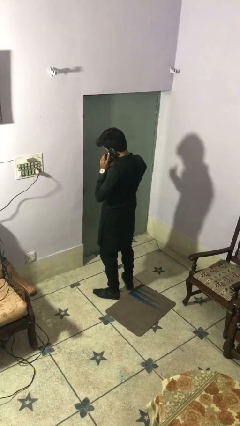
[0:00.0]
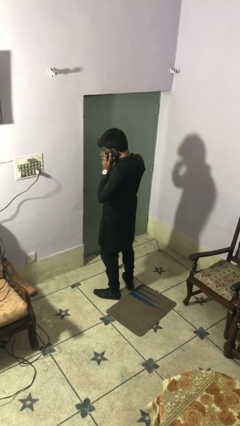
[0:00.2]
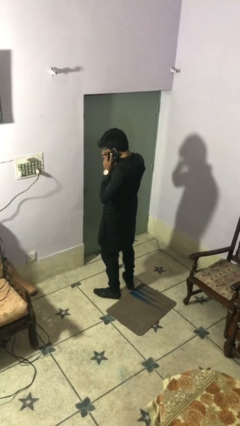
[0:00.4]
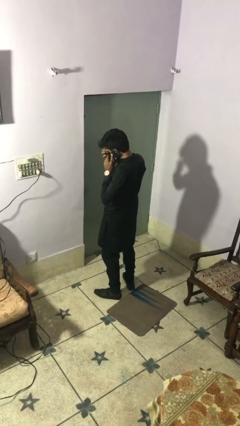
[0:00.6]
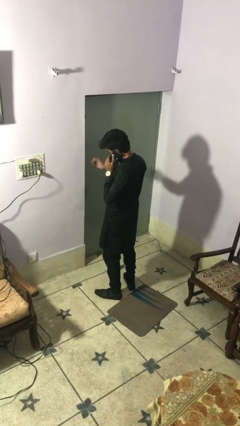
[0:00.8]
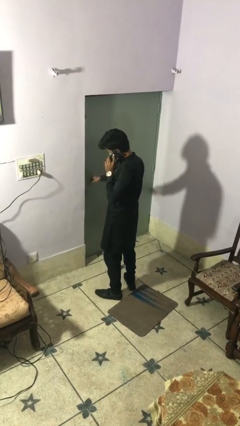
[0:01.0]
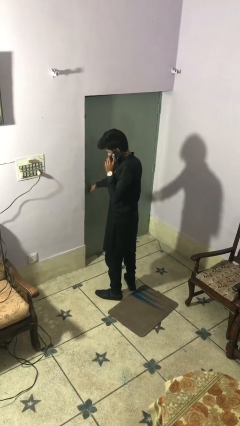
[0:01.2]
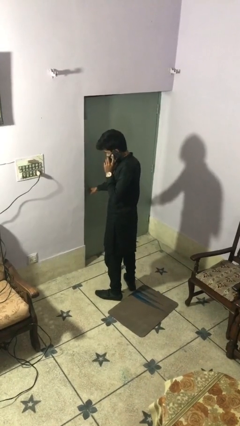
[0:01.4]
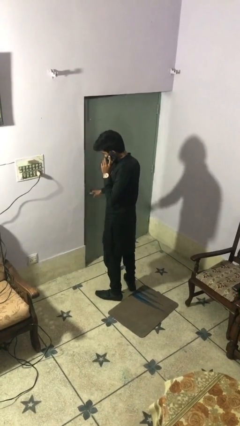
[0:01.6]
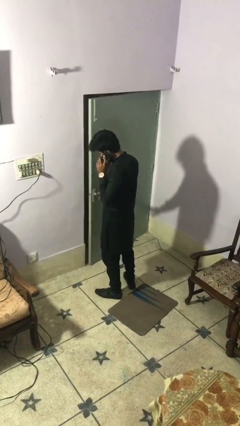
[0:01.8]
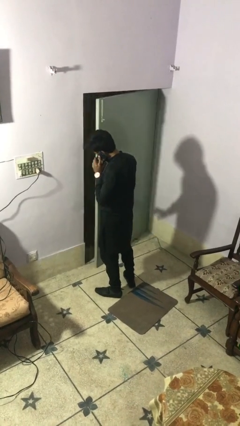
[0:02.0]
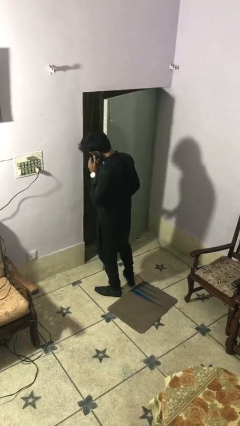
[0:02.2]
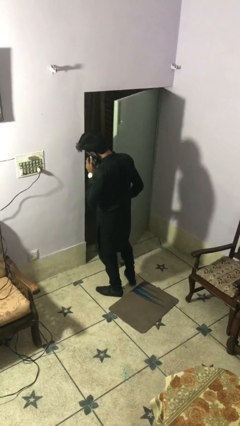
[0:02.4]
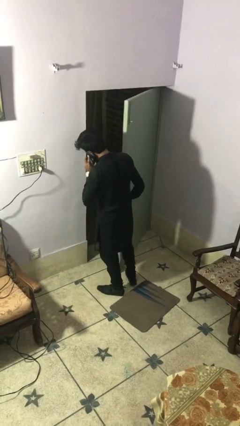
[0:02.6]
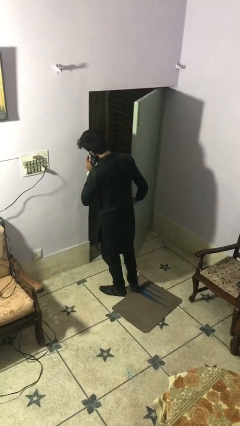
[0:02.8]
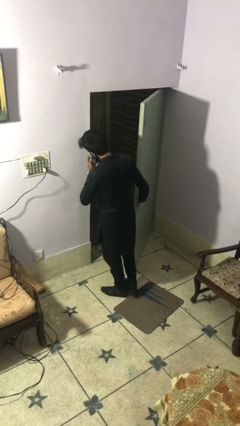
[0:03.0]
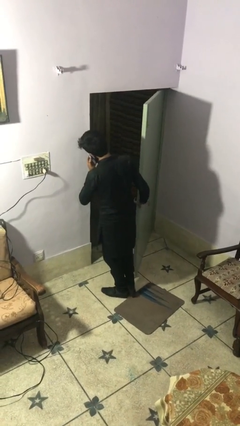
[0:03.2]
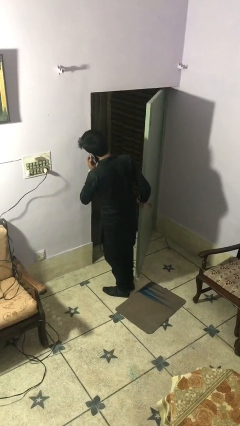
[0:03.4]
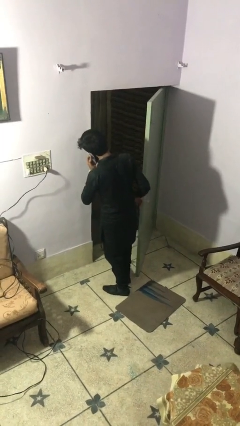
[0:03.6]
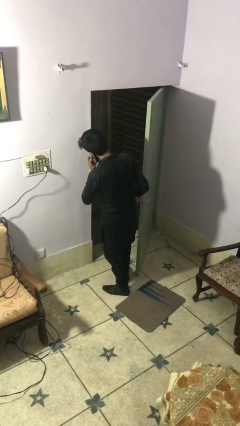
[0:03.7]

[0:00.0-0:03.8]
person opens facility door

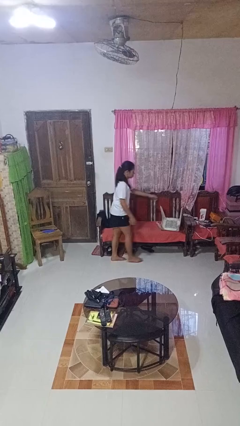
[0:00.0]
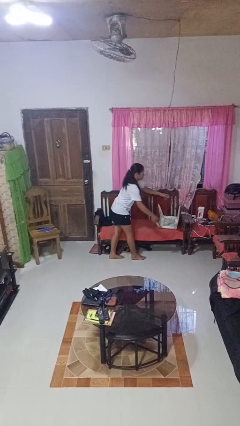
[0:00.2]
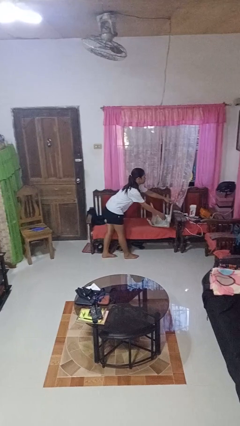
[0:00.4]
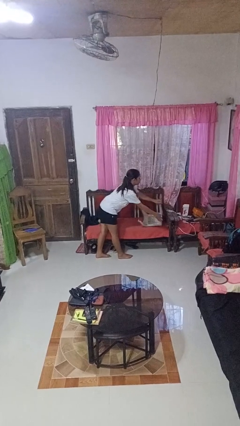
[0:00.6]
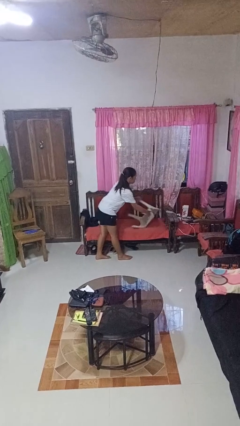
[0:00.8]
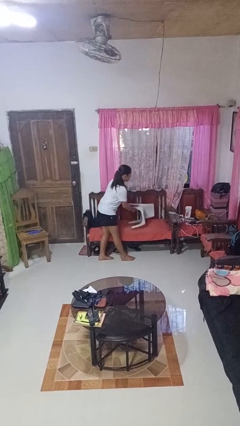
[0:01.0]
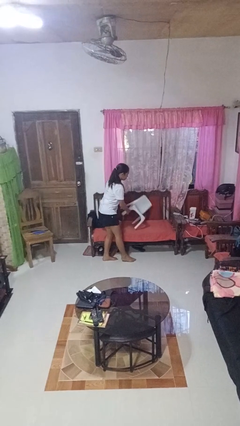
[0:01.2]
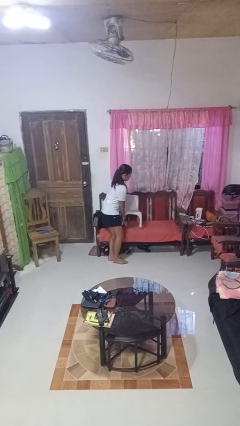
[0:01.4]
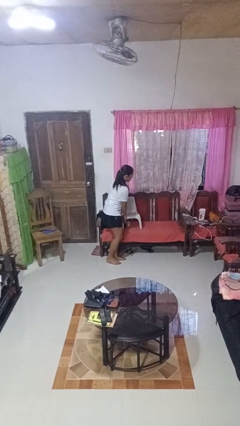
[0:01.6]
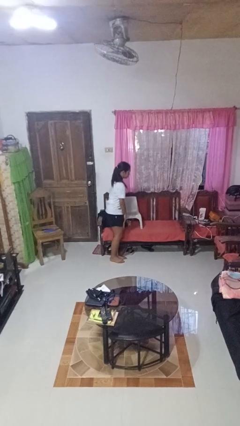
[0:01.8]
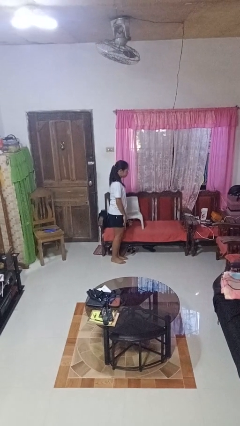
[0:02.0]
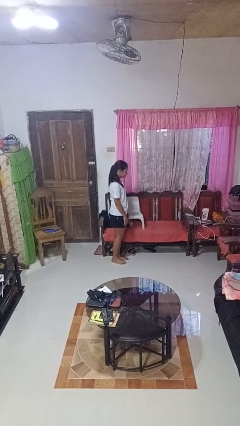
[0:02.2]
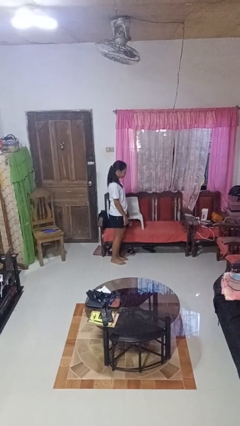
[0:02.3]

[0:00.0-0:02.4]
person sets upright furniture

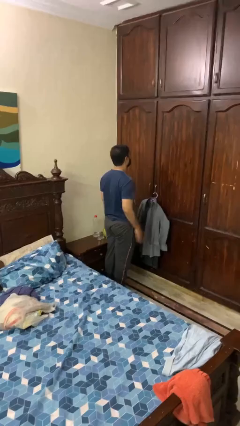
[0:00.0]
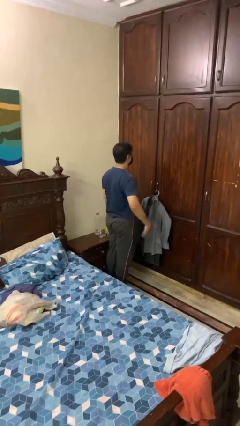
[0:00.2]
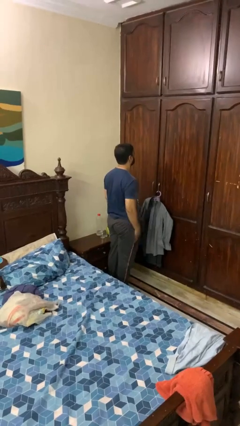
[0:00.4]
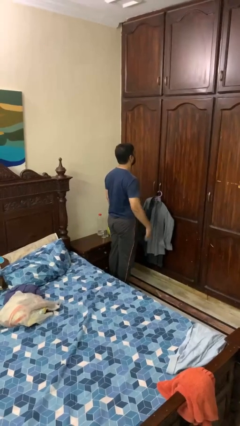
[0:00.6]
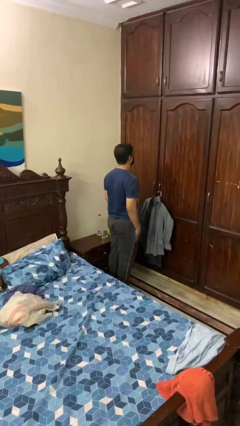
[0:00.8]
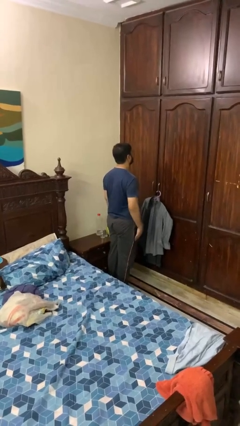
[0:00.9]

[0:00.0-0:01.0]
person slaps hands on thighs

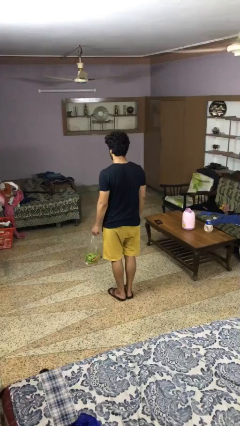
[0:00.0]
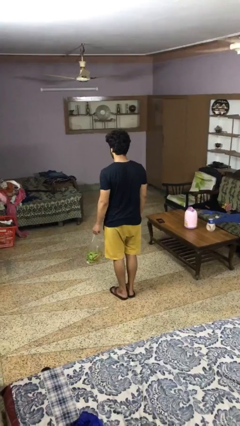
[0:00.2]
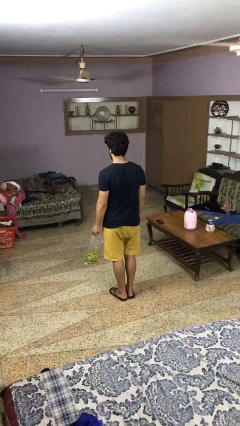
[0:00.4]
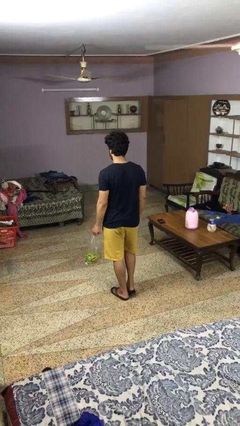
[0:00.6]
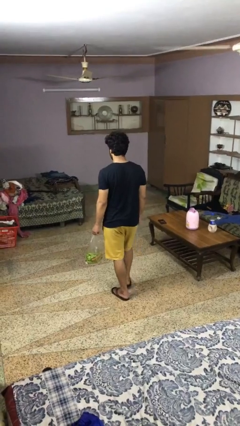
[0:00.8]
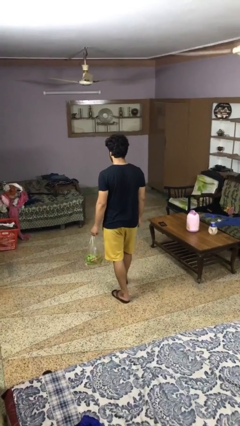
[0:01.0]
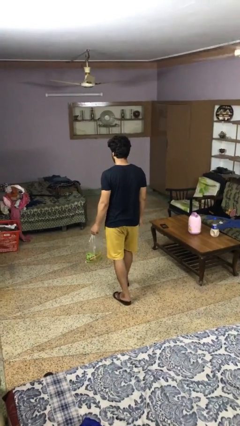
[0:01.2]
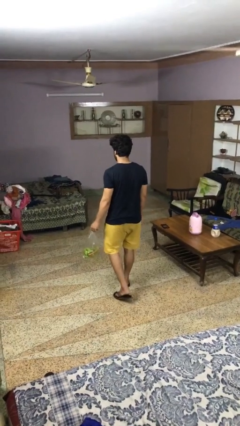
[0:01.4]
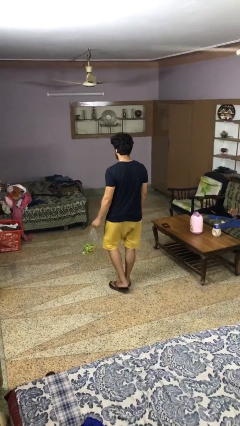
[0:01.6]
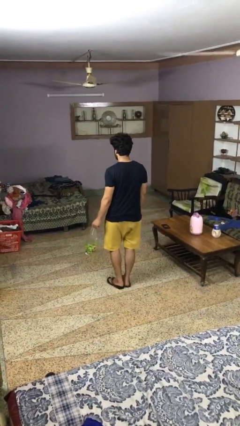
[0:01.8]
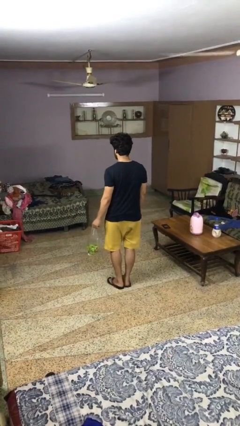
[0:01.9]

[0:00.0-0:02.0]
person carries groceries

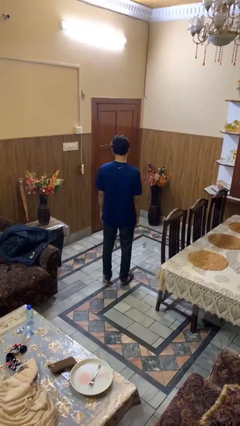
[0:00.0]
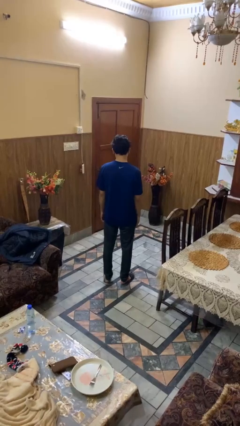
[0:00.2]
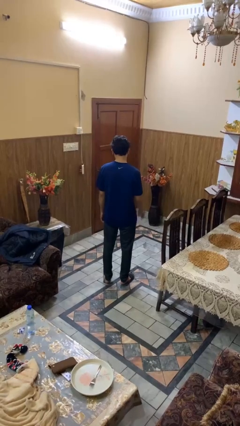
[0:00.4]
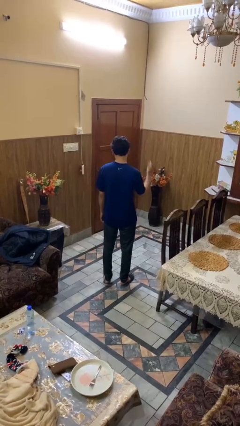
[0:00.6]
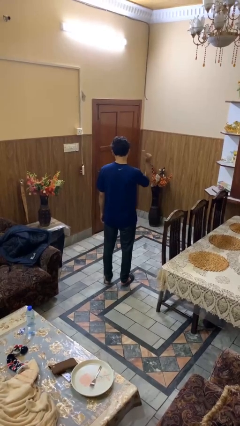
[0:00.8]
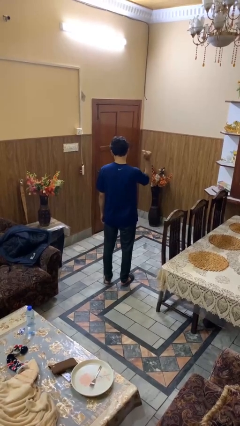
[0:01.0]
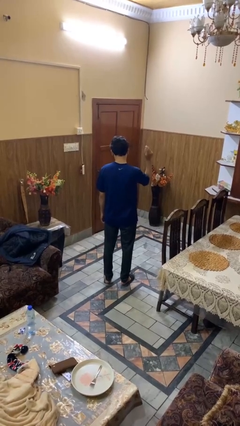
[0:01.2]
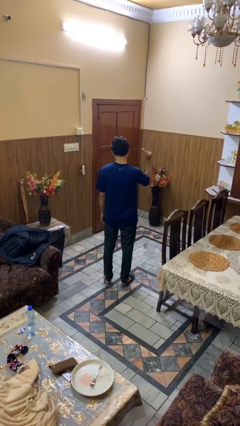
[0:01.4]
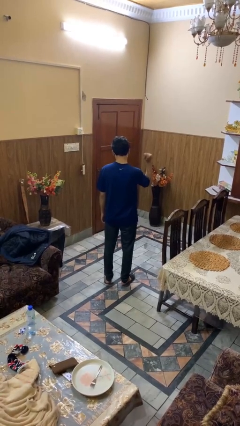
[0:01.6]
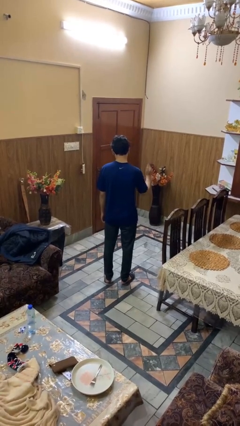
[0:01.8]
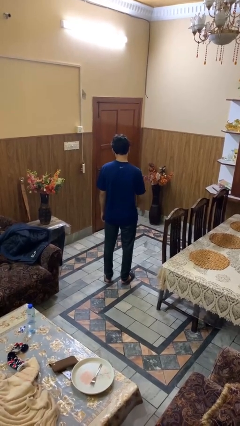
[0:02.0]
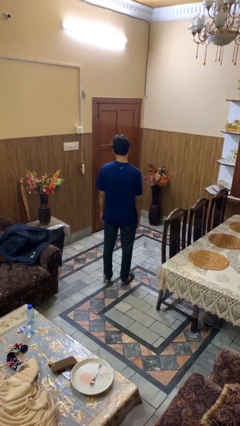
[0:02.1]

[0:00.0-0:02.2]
person snaps fingers

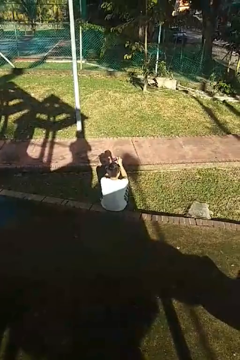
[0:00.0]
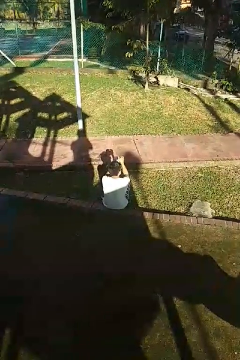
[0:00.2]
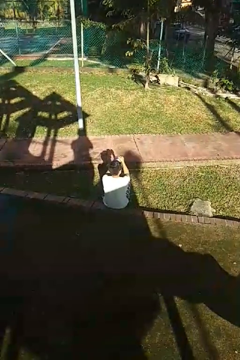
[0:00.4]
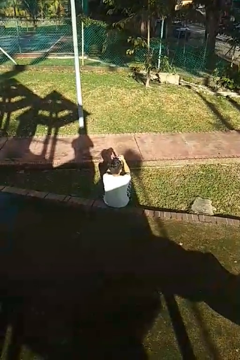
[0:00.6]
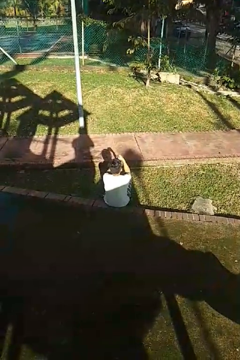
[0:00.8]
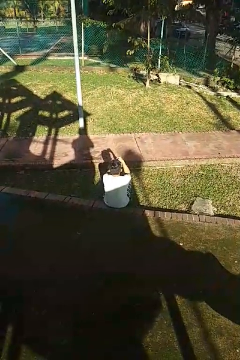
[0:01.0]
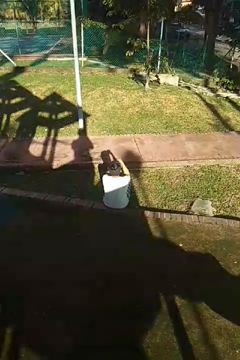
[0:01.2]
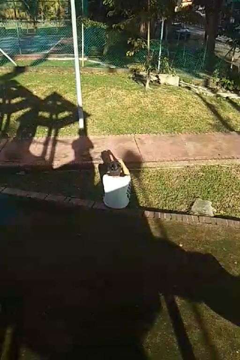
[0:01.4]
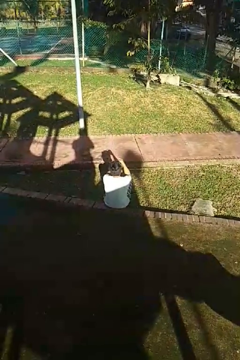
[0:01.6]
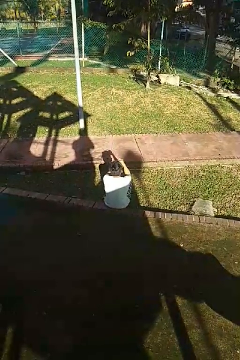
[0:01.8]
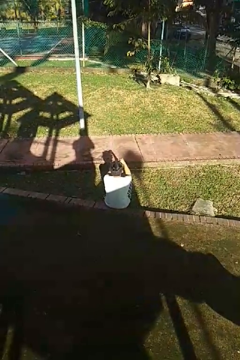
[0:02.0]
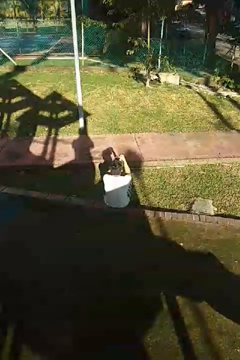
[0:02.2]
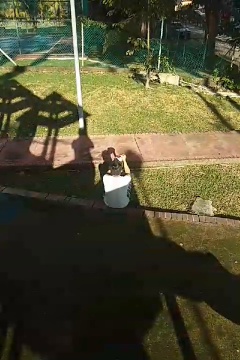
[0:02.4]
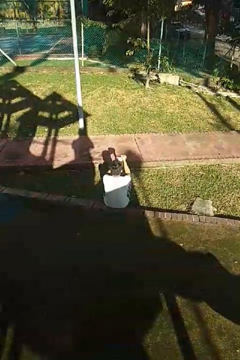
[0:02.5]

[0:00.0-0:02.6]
person drinks from mug

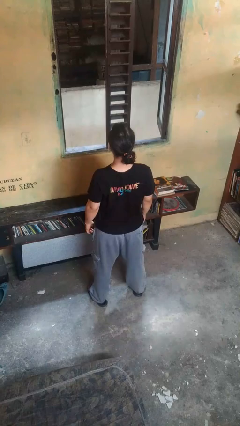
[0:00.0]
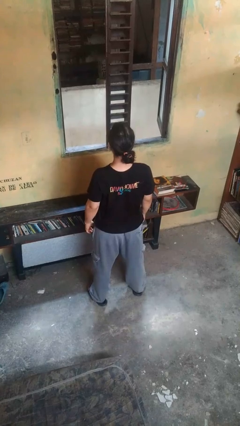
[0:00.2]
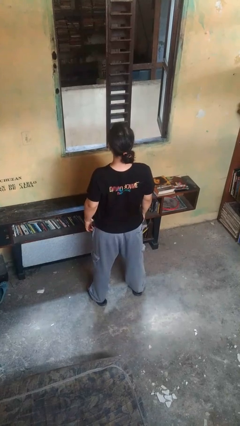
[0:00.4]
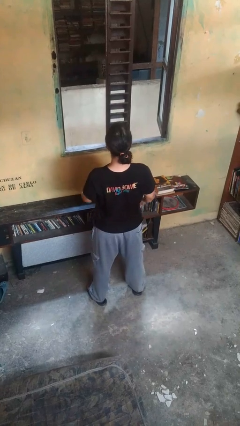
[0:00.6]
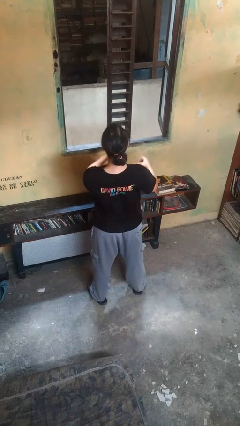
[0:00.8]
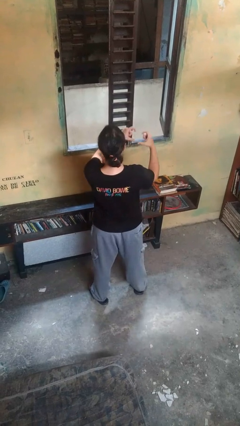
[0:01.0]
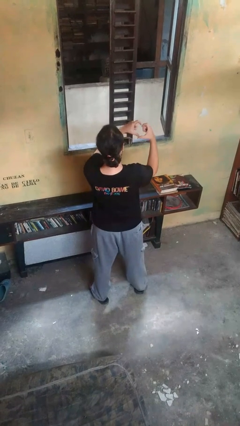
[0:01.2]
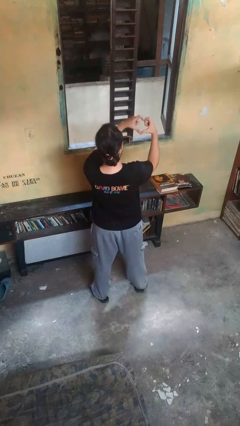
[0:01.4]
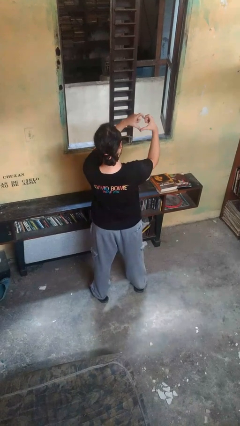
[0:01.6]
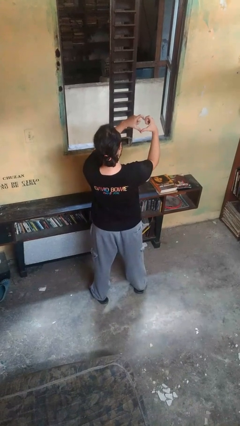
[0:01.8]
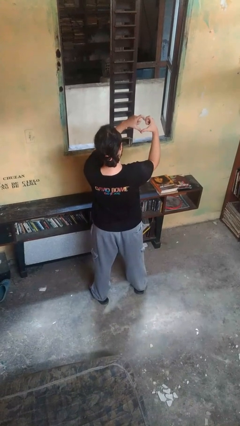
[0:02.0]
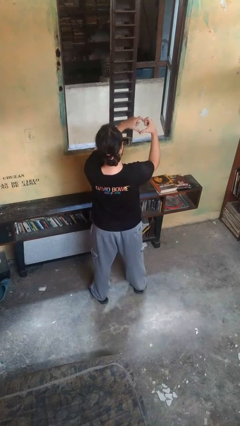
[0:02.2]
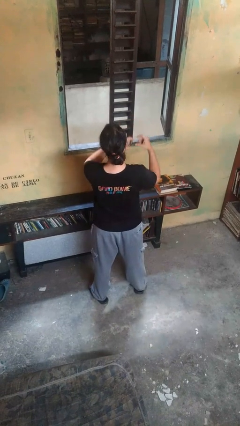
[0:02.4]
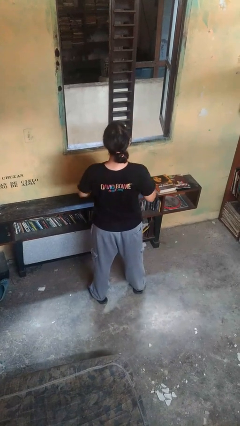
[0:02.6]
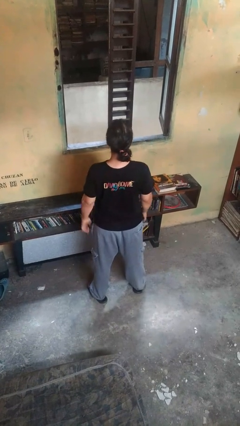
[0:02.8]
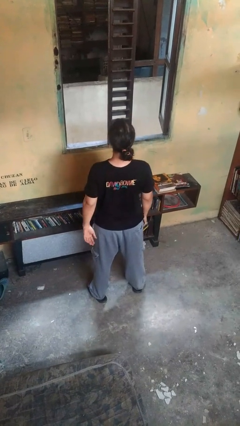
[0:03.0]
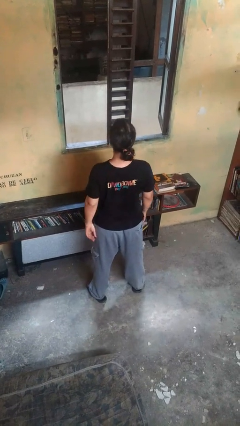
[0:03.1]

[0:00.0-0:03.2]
person gestures heart
